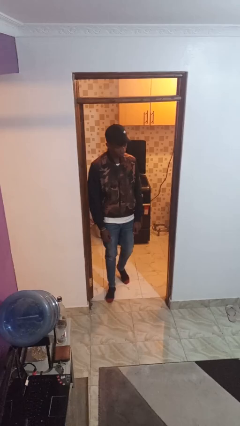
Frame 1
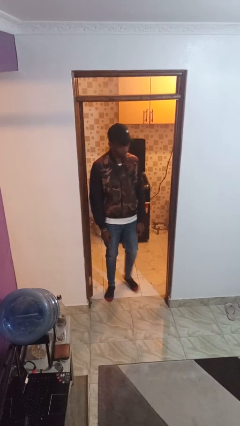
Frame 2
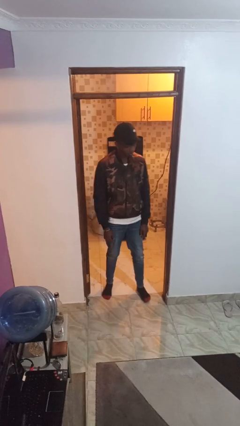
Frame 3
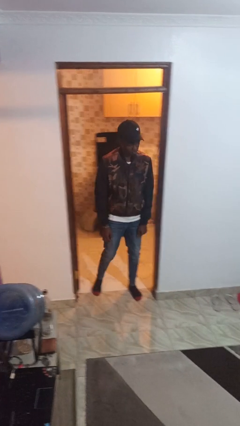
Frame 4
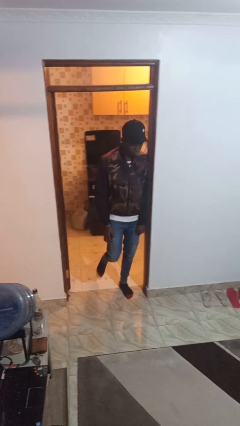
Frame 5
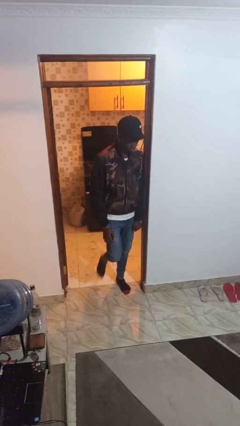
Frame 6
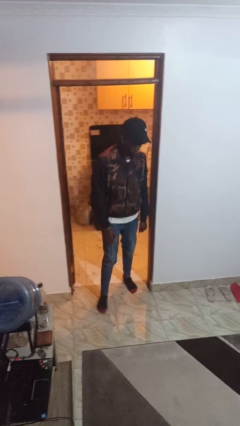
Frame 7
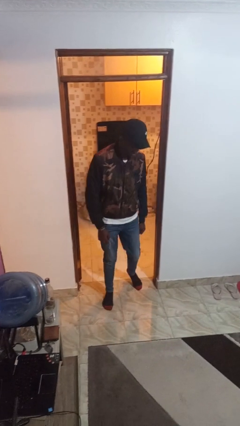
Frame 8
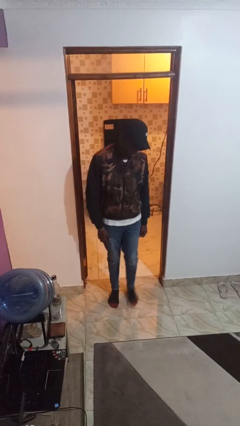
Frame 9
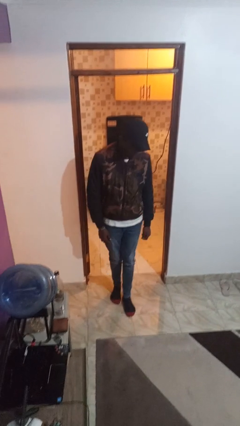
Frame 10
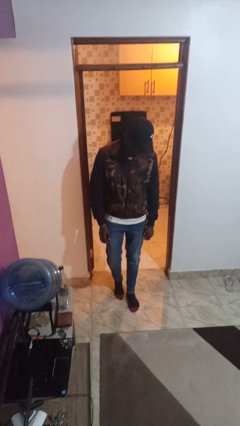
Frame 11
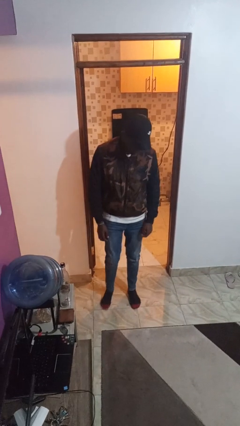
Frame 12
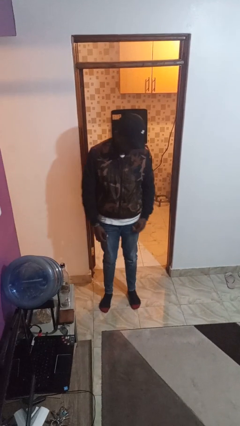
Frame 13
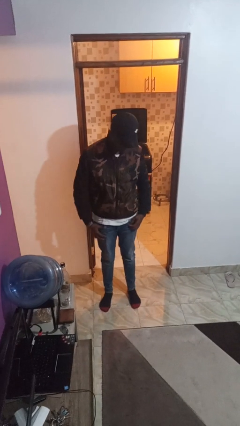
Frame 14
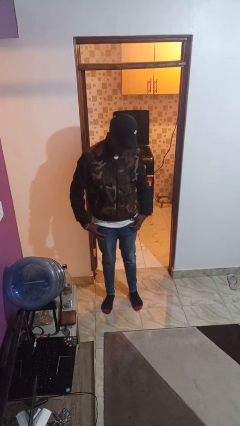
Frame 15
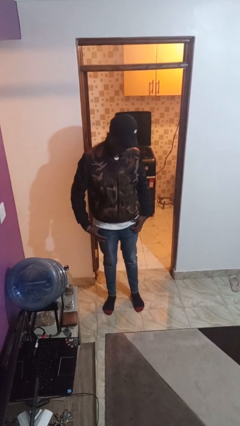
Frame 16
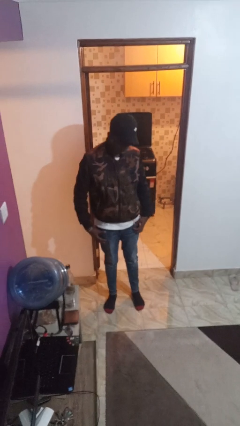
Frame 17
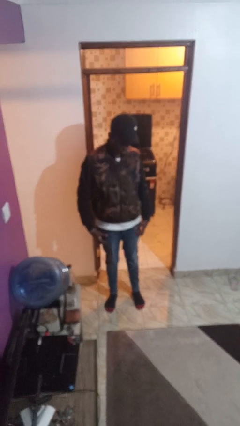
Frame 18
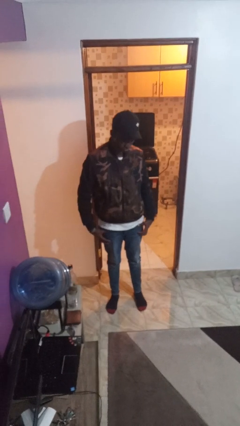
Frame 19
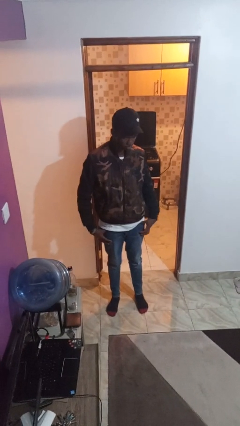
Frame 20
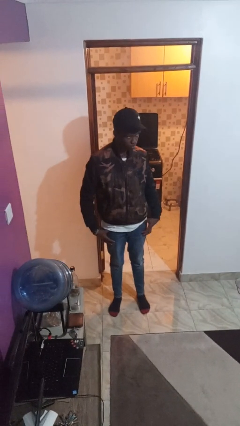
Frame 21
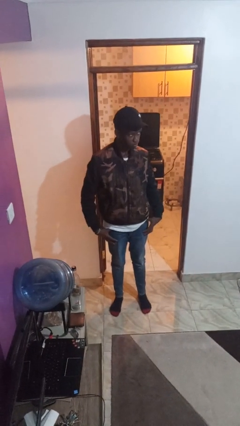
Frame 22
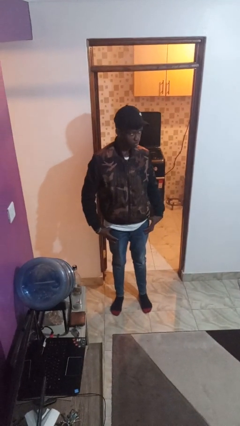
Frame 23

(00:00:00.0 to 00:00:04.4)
person bumps into wall

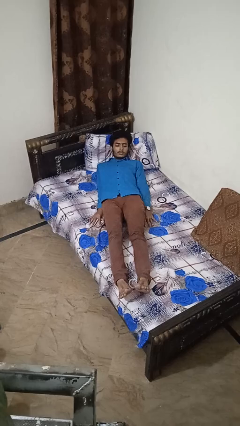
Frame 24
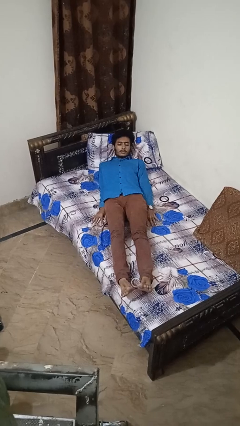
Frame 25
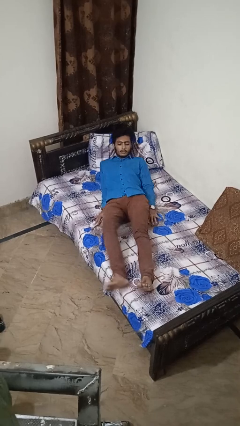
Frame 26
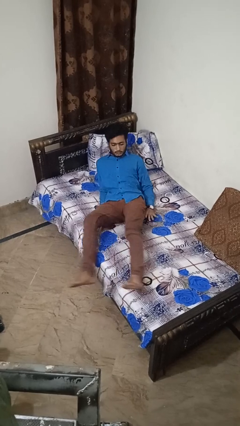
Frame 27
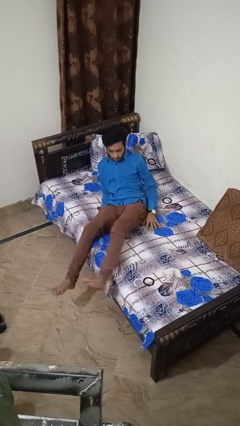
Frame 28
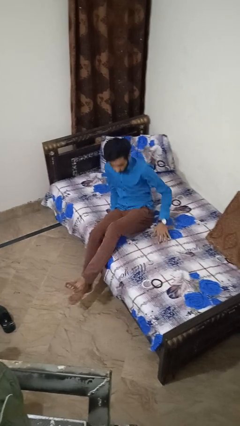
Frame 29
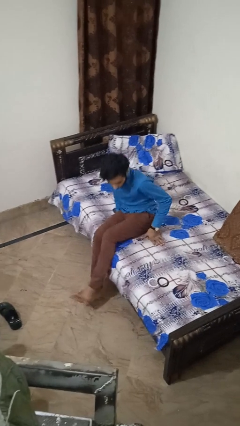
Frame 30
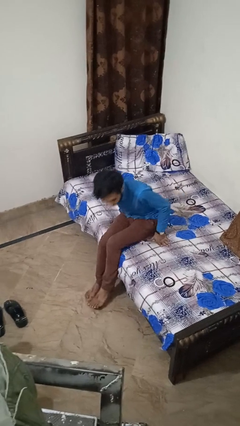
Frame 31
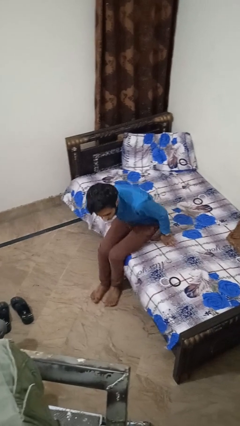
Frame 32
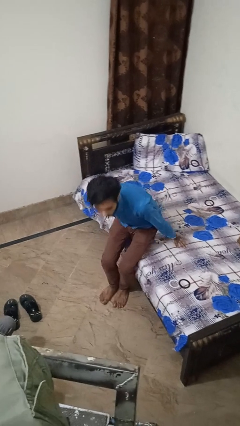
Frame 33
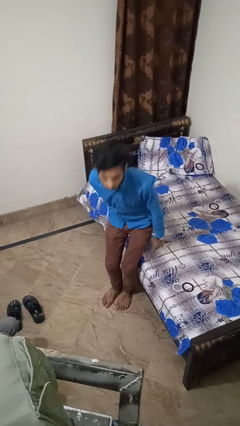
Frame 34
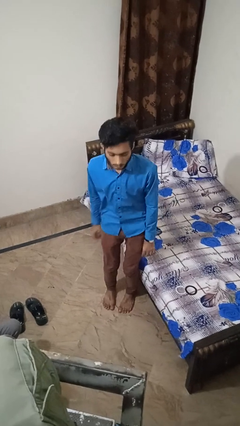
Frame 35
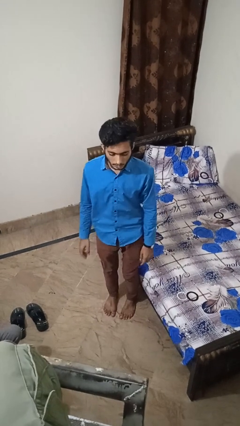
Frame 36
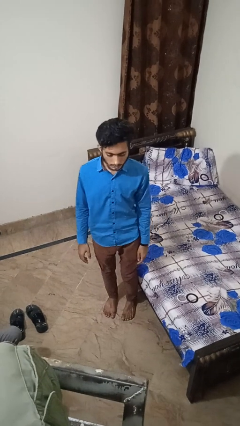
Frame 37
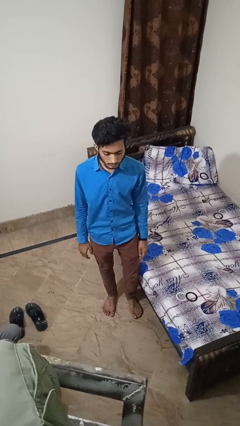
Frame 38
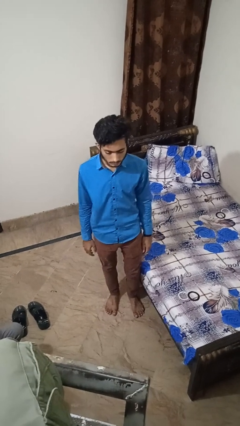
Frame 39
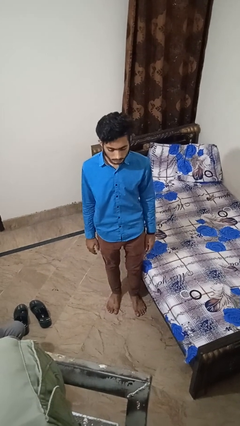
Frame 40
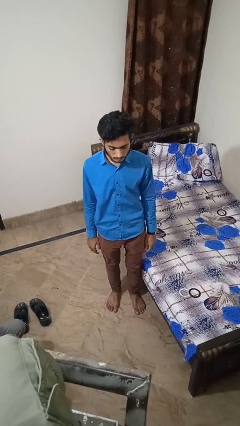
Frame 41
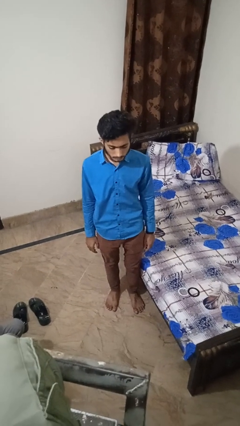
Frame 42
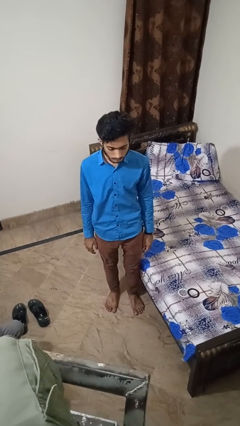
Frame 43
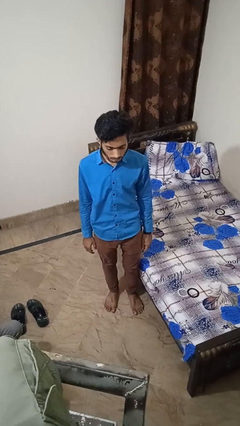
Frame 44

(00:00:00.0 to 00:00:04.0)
person stands up

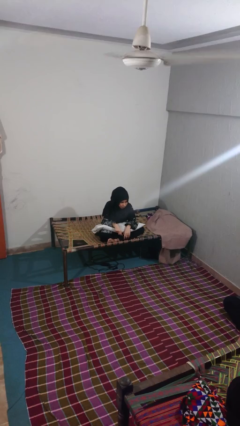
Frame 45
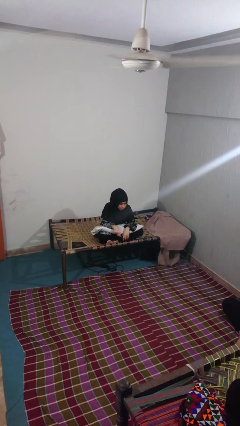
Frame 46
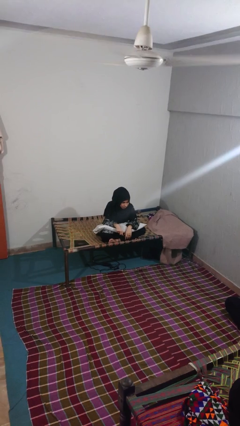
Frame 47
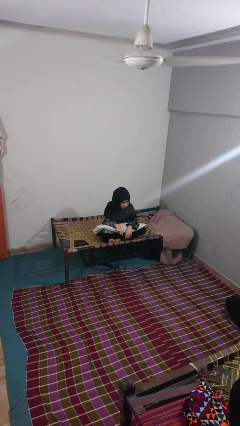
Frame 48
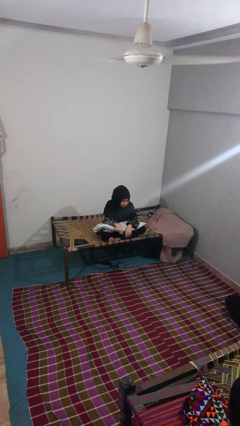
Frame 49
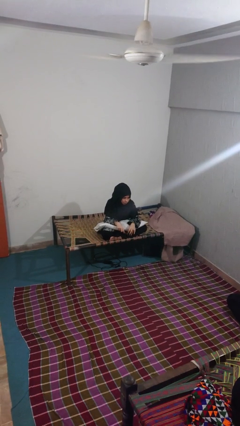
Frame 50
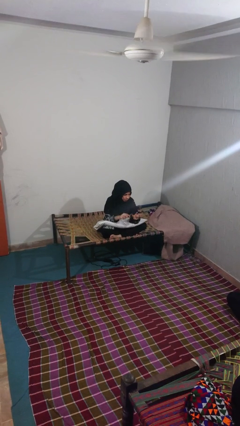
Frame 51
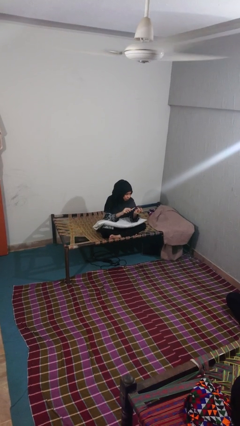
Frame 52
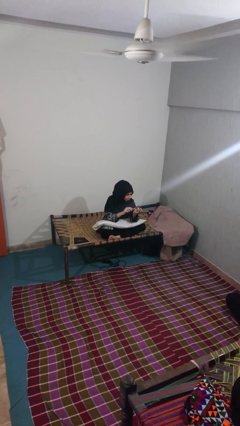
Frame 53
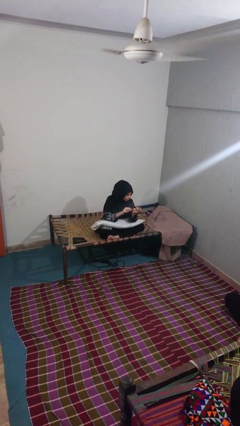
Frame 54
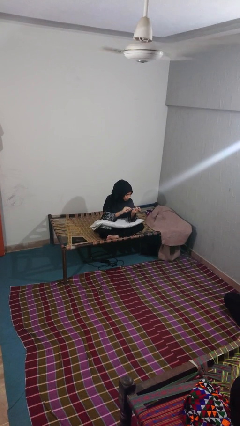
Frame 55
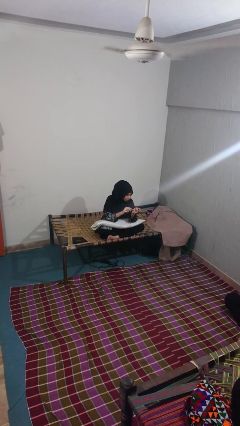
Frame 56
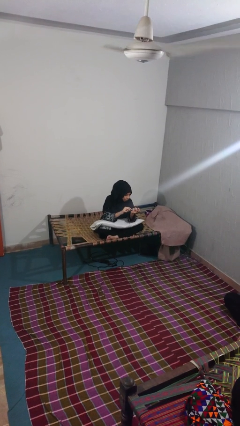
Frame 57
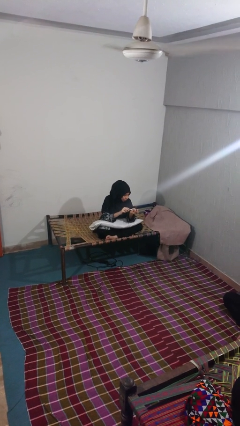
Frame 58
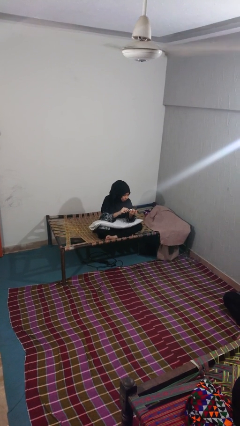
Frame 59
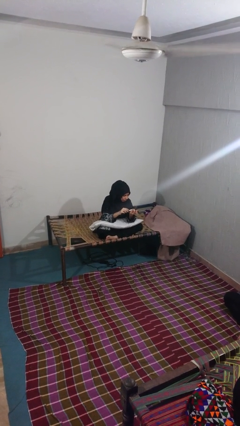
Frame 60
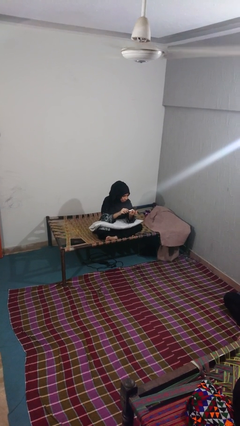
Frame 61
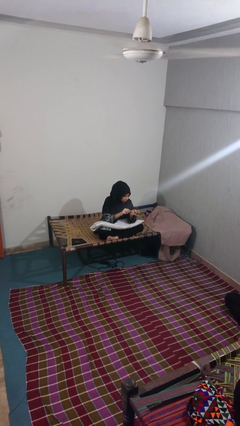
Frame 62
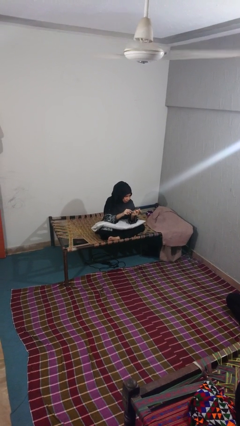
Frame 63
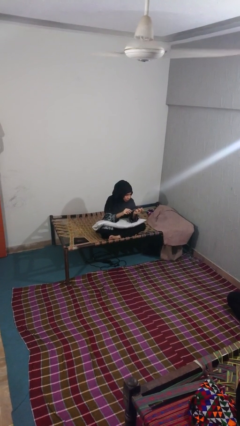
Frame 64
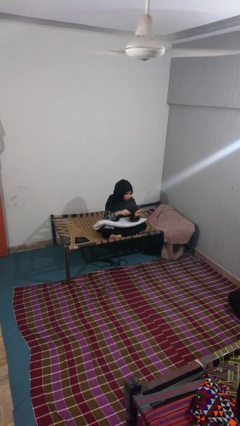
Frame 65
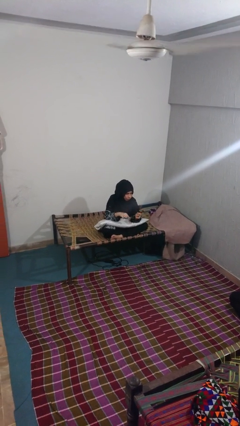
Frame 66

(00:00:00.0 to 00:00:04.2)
person files fingernails

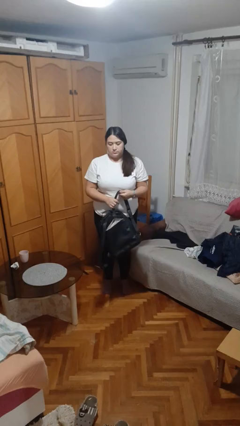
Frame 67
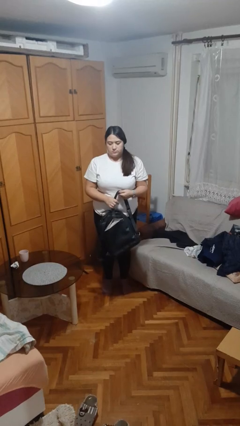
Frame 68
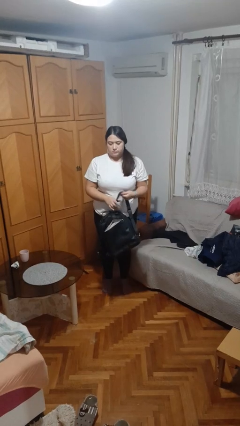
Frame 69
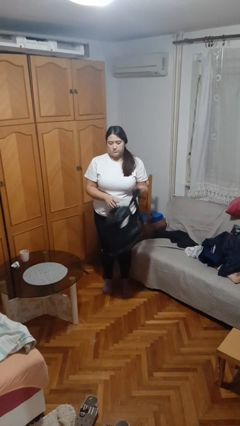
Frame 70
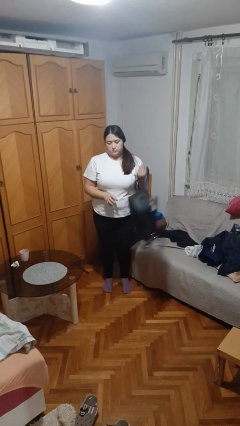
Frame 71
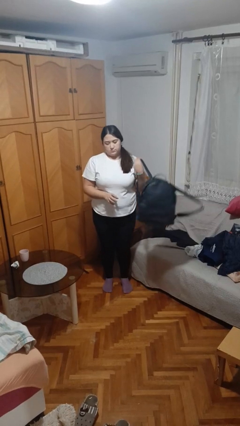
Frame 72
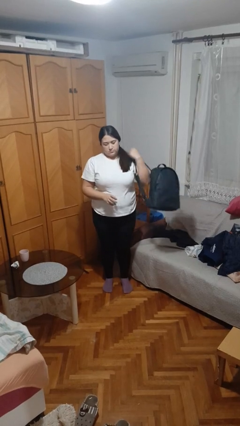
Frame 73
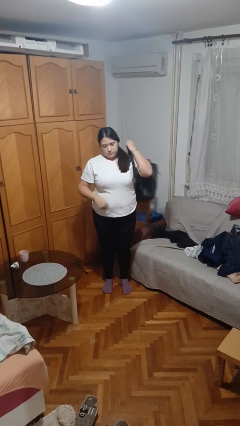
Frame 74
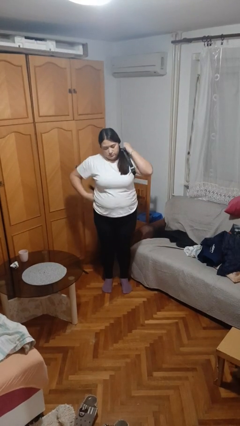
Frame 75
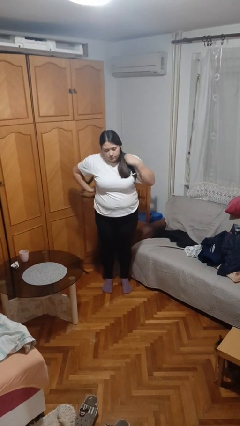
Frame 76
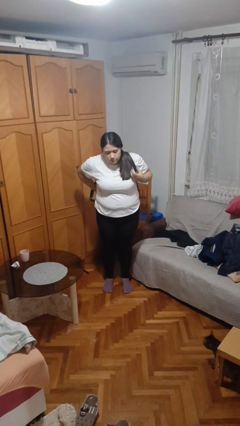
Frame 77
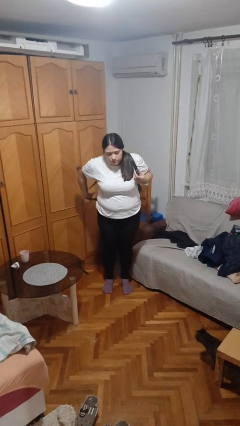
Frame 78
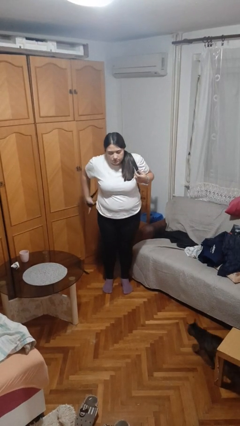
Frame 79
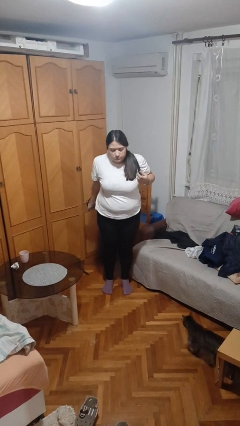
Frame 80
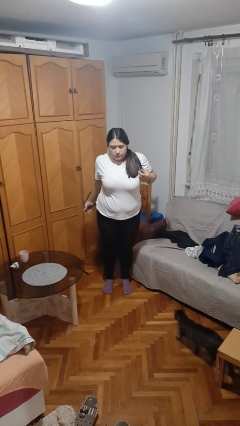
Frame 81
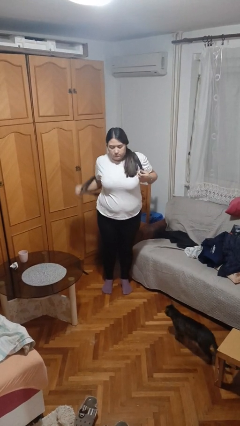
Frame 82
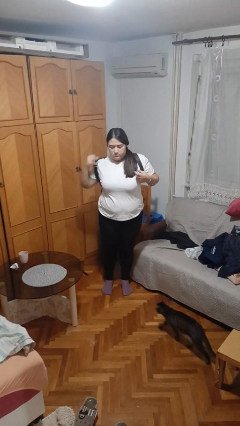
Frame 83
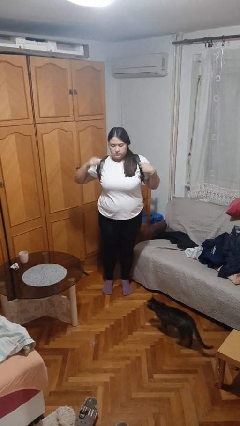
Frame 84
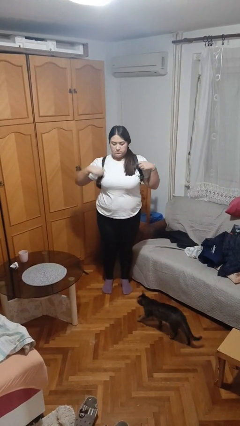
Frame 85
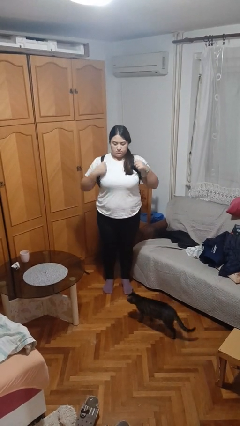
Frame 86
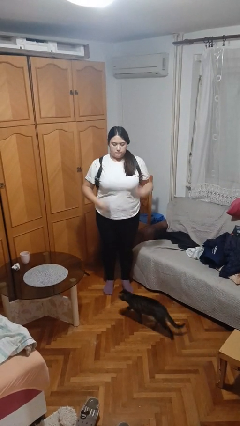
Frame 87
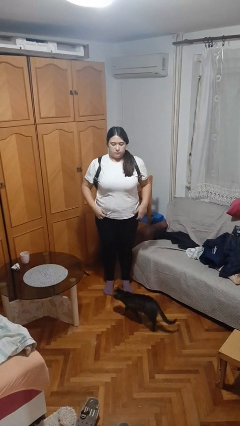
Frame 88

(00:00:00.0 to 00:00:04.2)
person puts on backpack

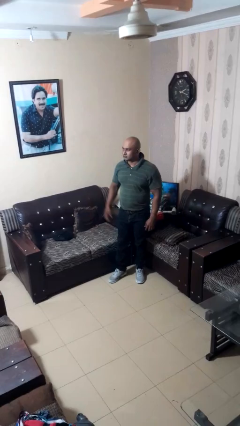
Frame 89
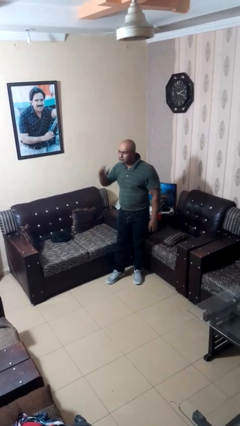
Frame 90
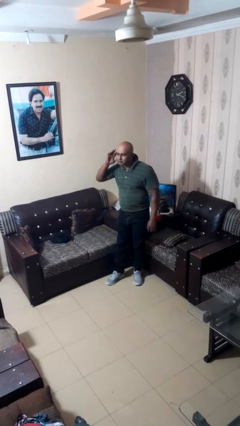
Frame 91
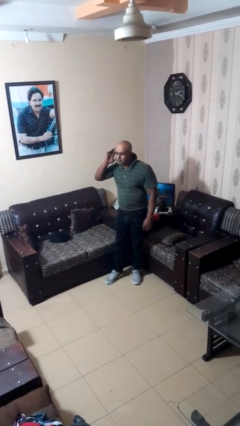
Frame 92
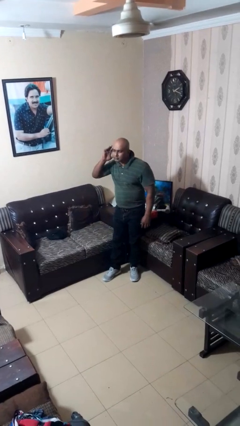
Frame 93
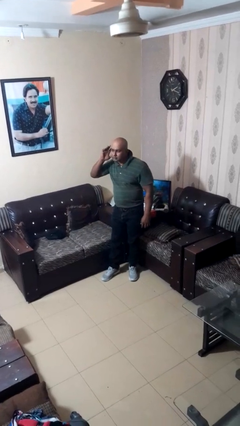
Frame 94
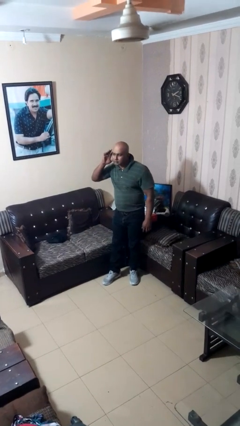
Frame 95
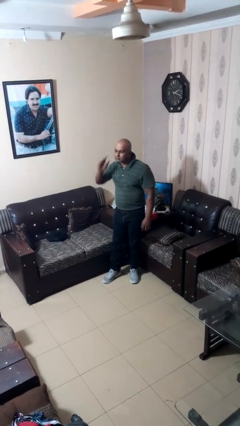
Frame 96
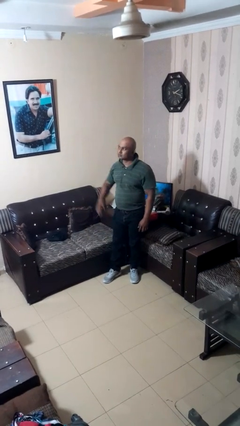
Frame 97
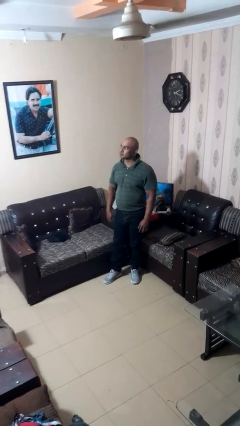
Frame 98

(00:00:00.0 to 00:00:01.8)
person gestures listen closely
